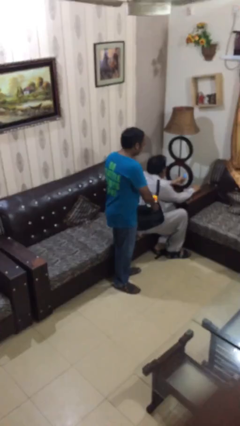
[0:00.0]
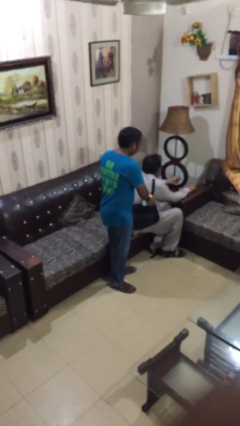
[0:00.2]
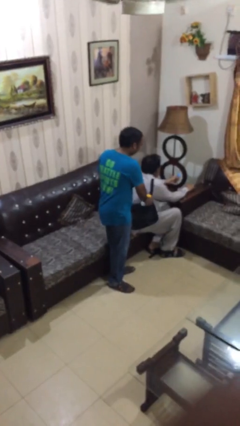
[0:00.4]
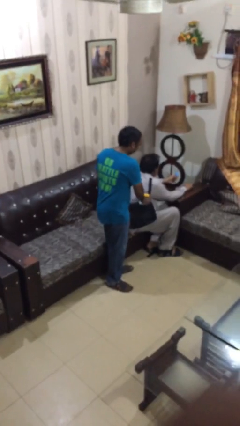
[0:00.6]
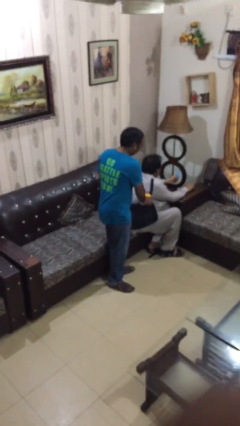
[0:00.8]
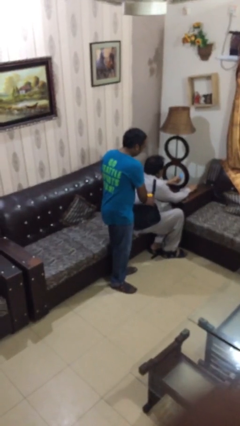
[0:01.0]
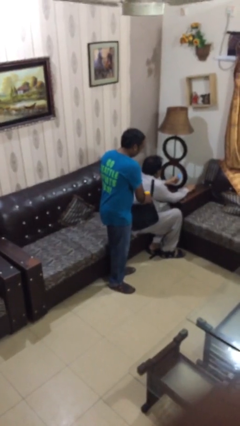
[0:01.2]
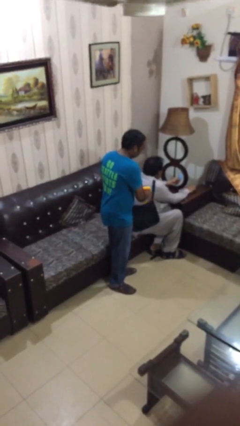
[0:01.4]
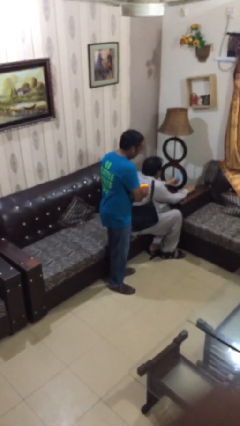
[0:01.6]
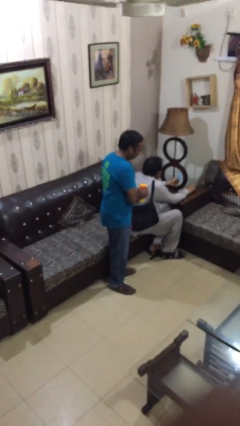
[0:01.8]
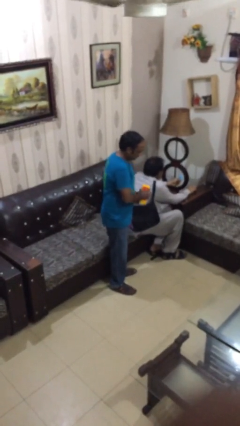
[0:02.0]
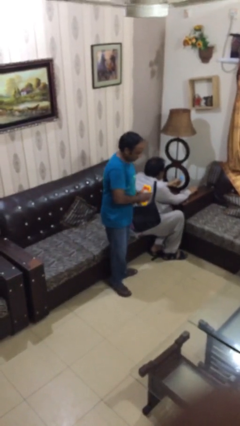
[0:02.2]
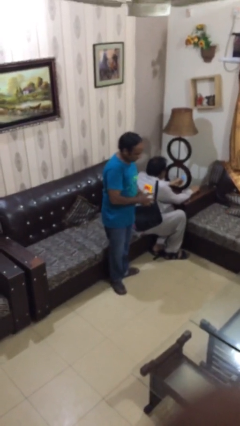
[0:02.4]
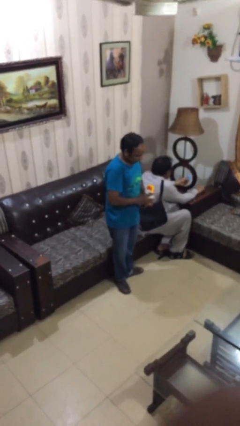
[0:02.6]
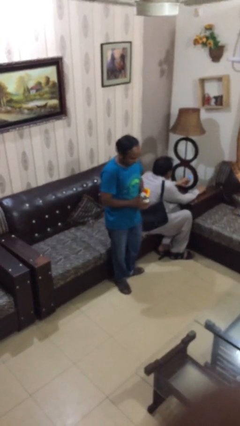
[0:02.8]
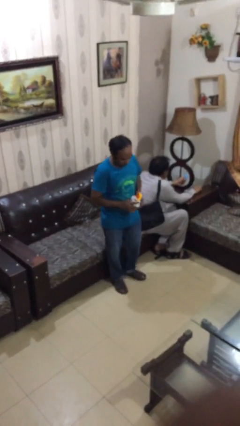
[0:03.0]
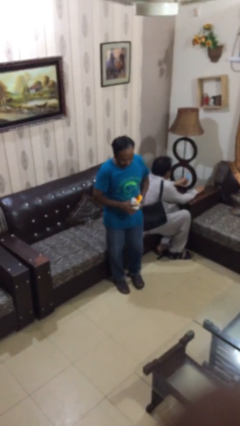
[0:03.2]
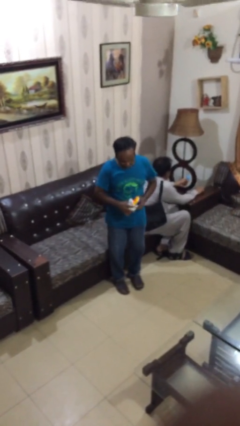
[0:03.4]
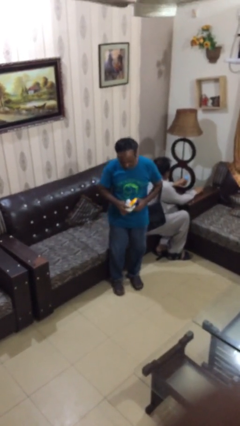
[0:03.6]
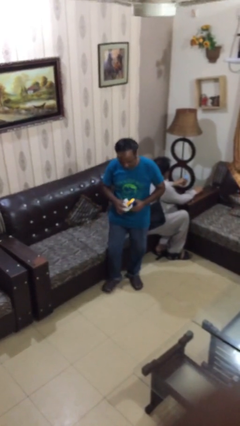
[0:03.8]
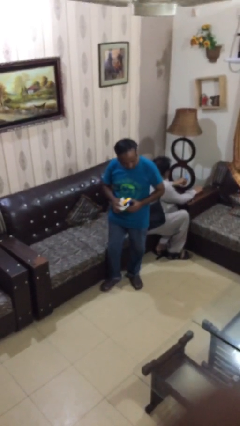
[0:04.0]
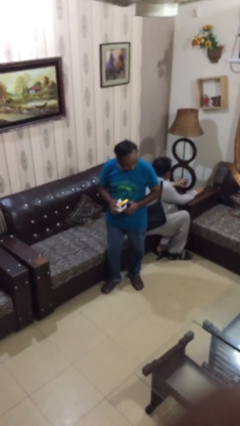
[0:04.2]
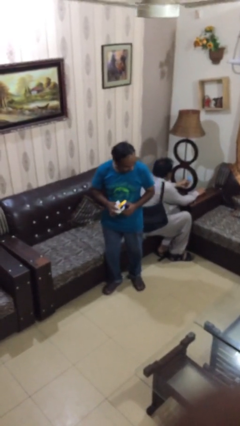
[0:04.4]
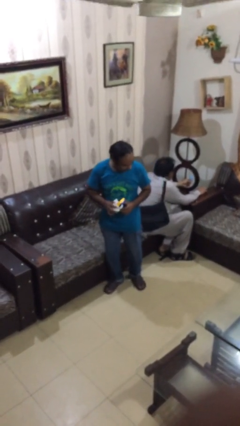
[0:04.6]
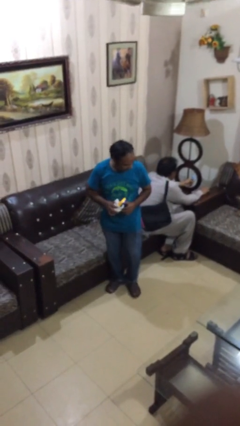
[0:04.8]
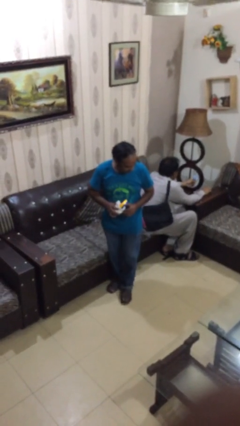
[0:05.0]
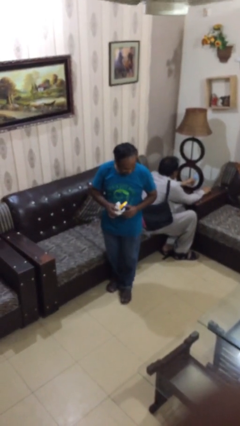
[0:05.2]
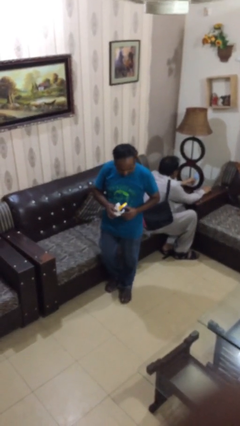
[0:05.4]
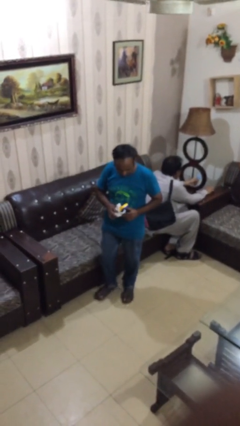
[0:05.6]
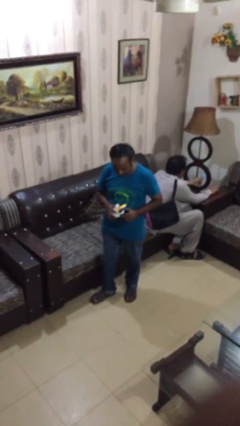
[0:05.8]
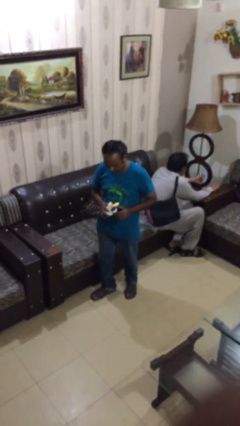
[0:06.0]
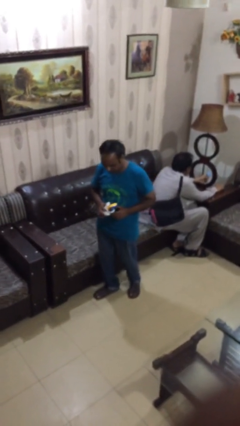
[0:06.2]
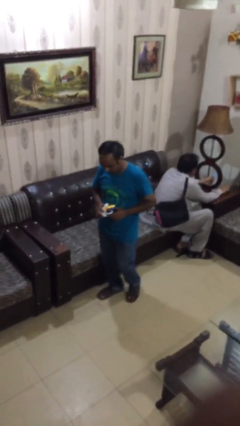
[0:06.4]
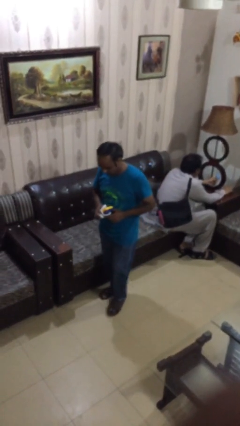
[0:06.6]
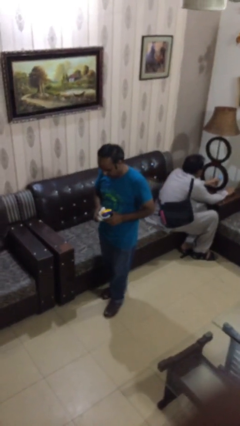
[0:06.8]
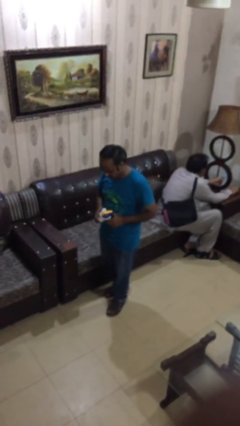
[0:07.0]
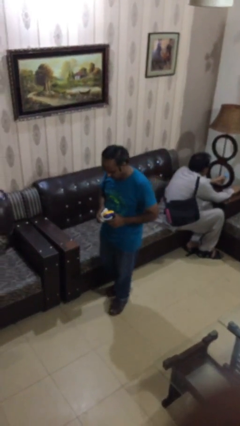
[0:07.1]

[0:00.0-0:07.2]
person steals object from person

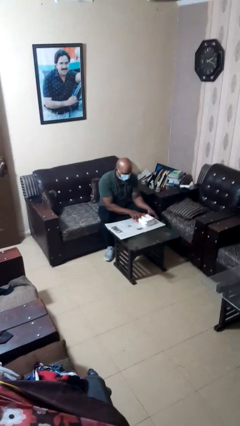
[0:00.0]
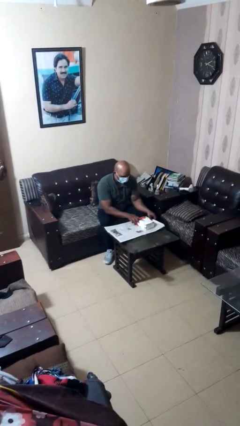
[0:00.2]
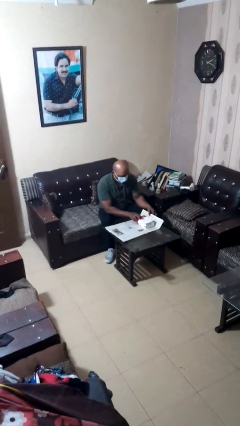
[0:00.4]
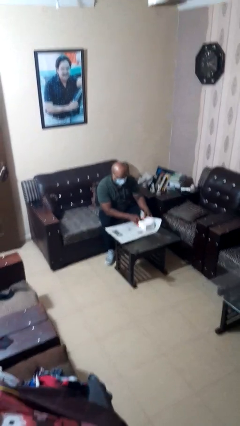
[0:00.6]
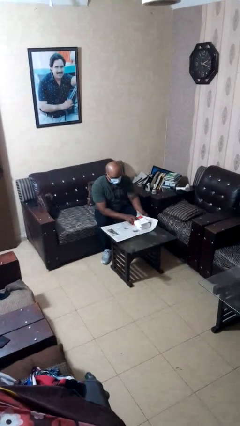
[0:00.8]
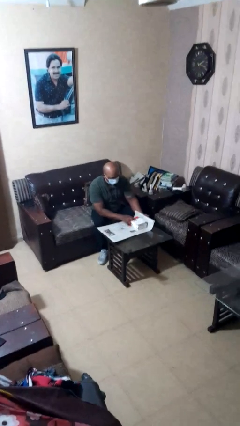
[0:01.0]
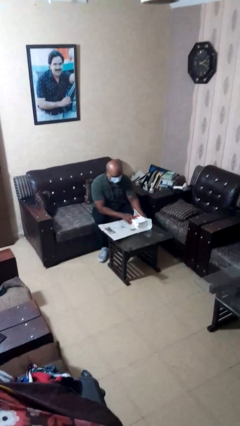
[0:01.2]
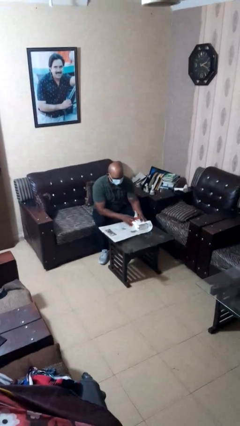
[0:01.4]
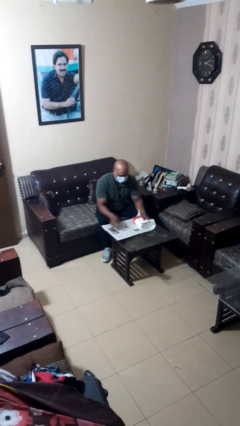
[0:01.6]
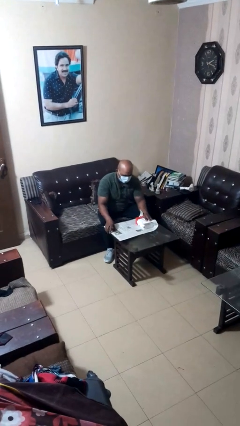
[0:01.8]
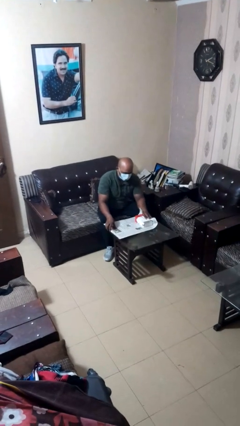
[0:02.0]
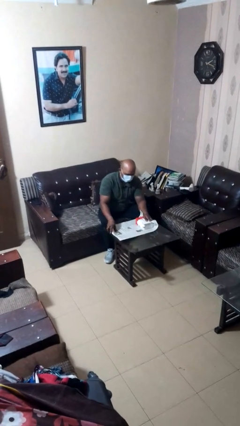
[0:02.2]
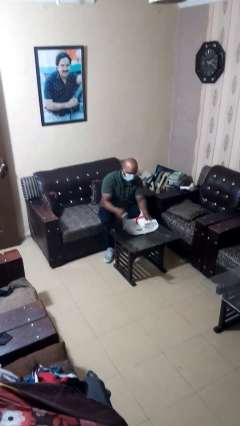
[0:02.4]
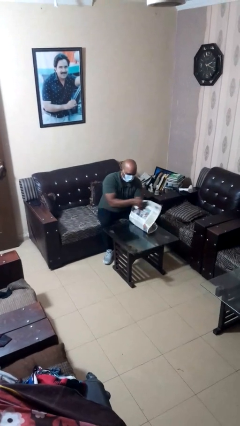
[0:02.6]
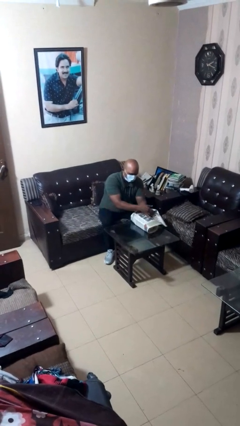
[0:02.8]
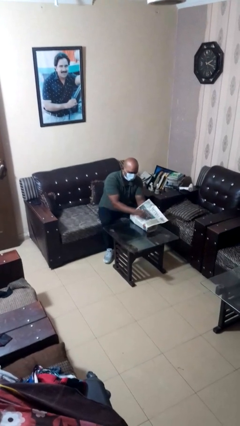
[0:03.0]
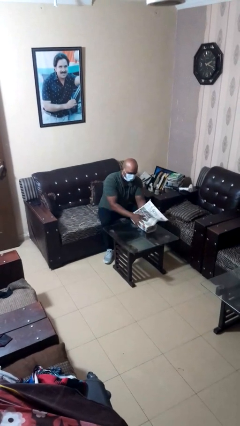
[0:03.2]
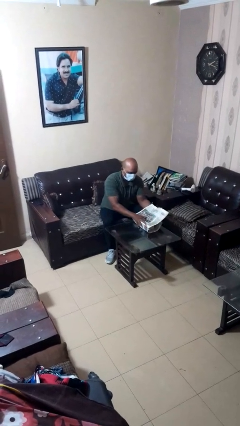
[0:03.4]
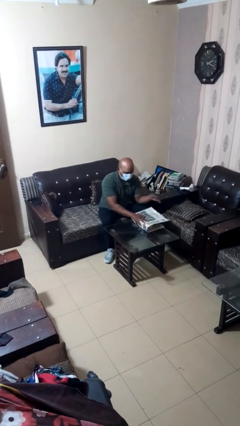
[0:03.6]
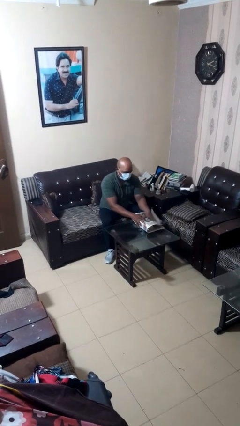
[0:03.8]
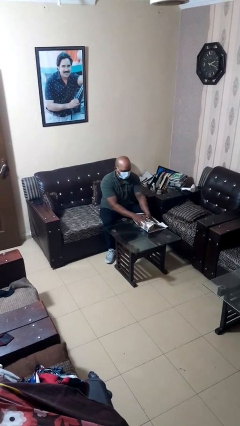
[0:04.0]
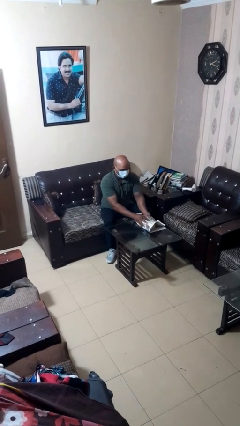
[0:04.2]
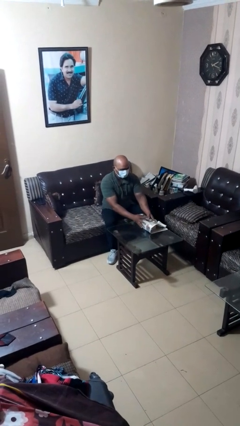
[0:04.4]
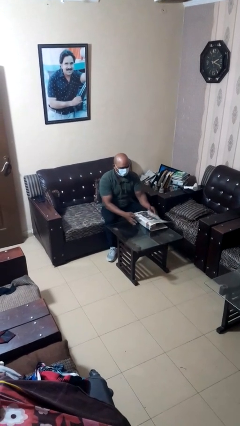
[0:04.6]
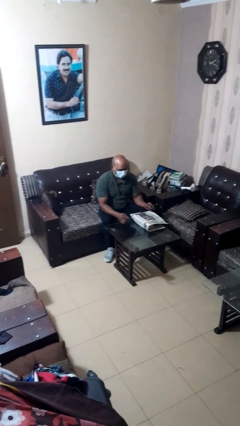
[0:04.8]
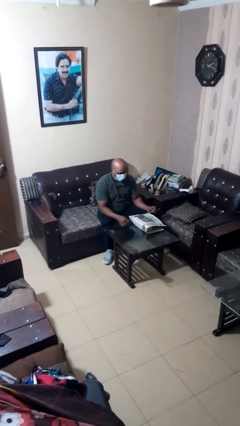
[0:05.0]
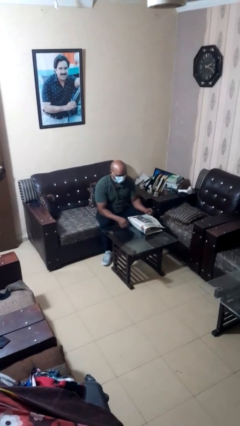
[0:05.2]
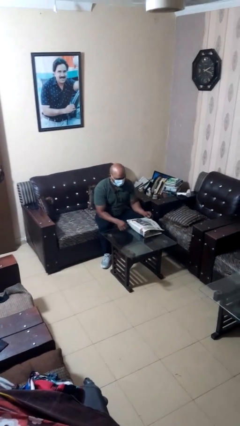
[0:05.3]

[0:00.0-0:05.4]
person wraps box

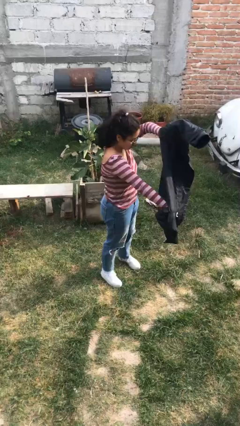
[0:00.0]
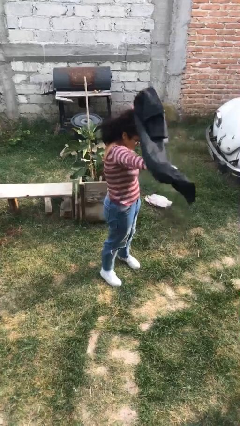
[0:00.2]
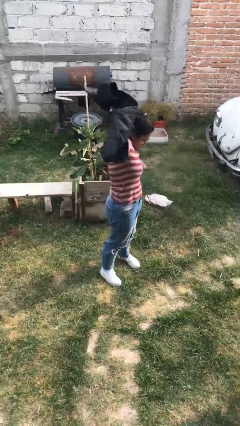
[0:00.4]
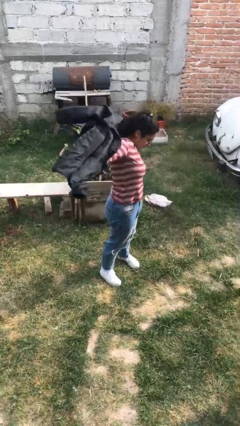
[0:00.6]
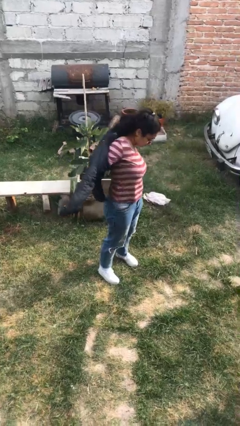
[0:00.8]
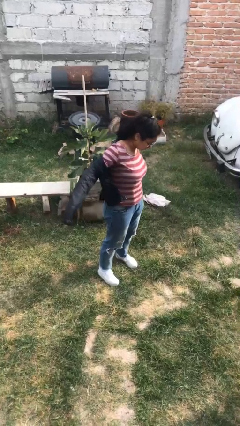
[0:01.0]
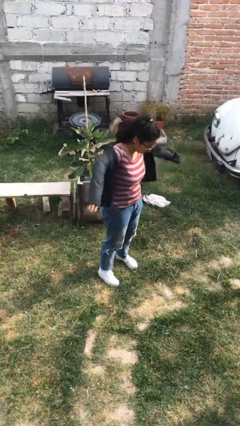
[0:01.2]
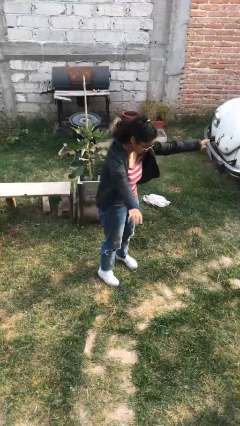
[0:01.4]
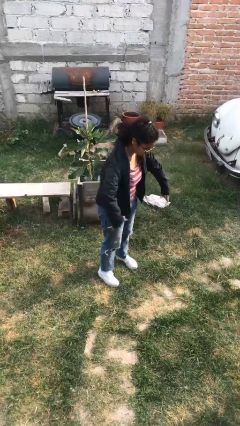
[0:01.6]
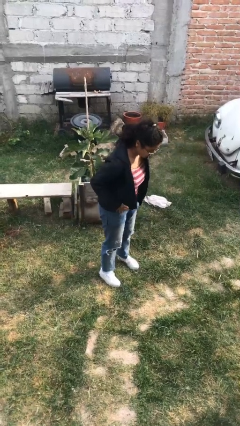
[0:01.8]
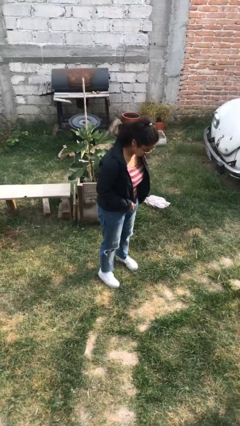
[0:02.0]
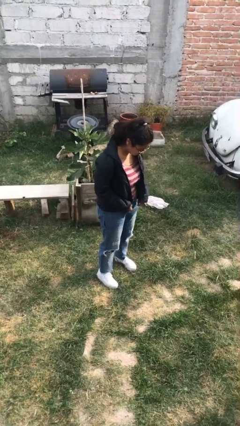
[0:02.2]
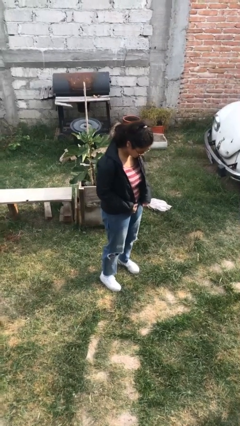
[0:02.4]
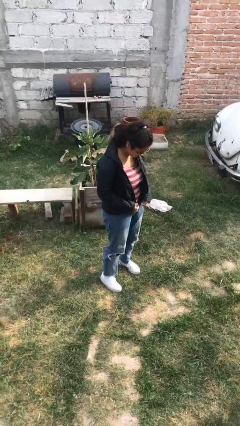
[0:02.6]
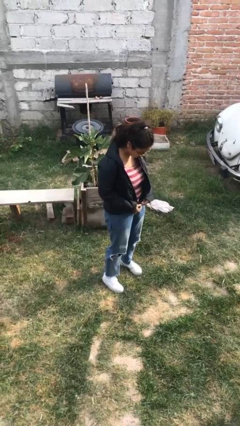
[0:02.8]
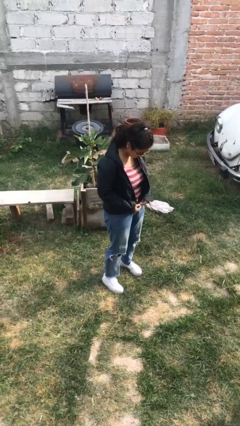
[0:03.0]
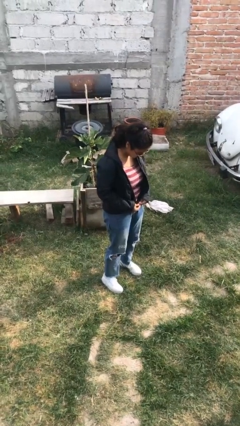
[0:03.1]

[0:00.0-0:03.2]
person puts on jacket

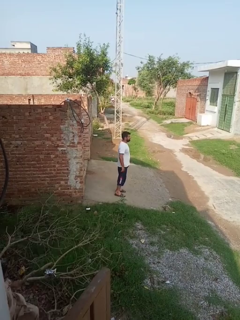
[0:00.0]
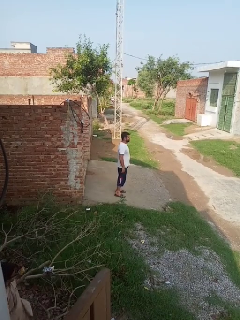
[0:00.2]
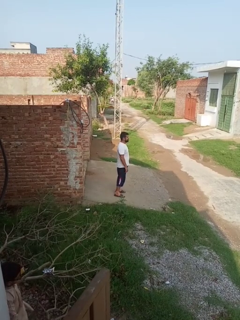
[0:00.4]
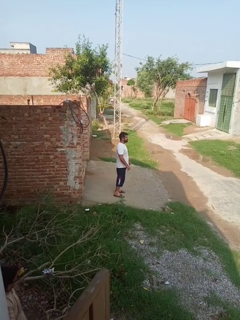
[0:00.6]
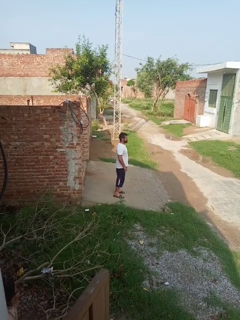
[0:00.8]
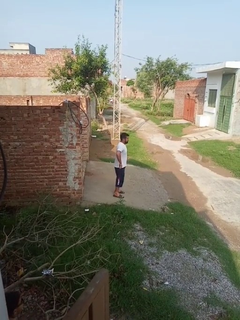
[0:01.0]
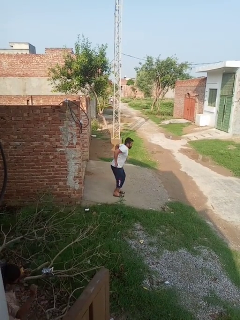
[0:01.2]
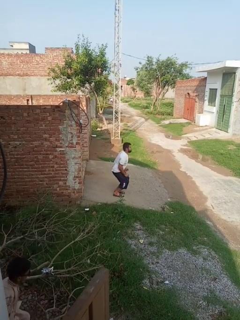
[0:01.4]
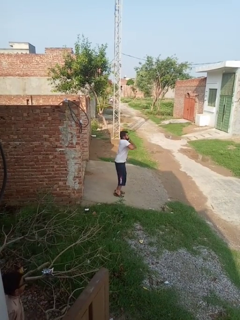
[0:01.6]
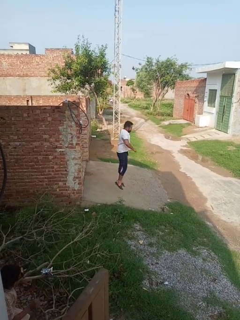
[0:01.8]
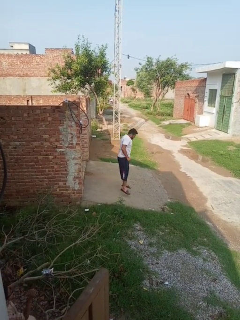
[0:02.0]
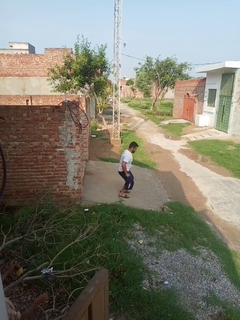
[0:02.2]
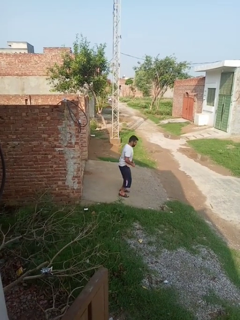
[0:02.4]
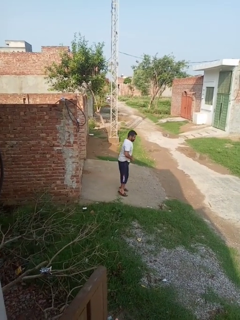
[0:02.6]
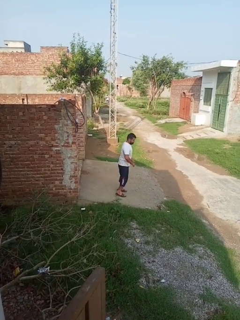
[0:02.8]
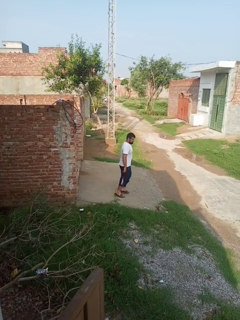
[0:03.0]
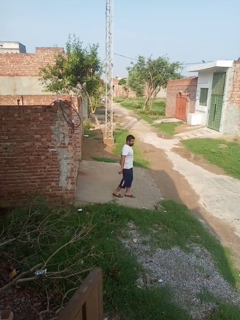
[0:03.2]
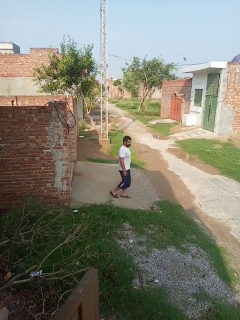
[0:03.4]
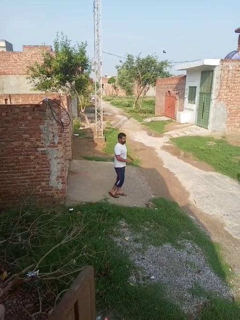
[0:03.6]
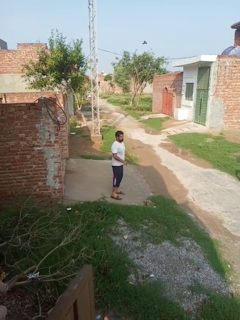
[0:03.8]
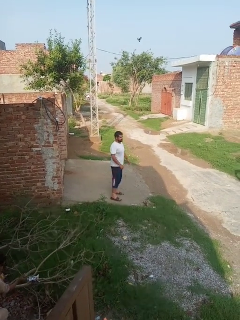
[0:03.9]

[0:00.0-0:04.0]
person jumps
